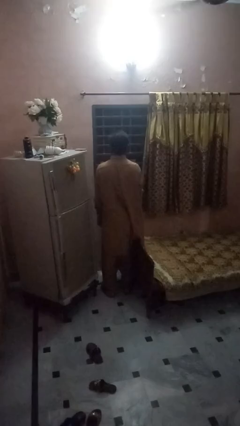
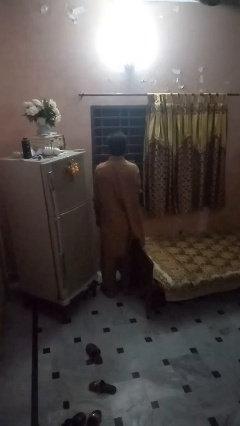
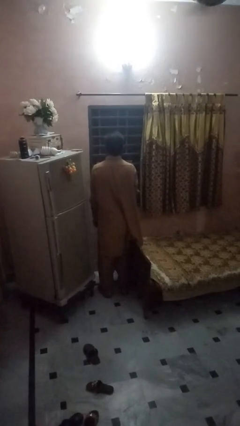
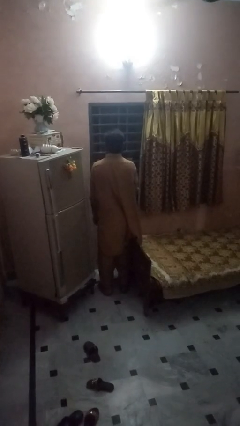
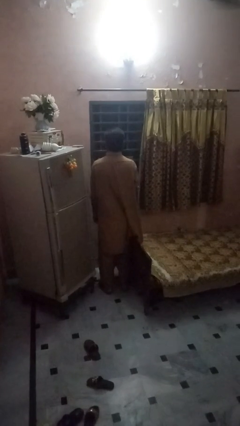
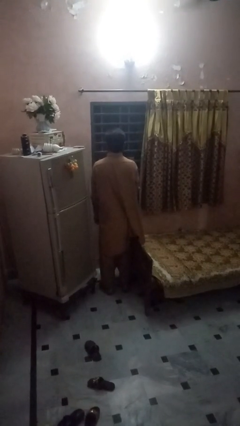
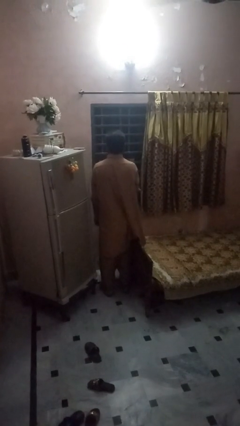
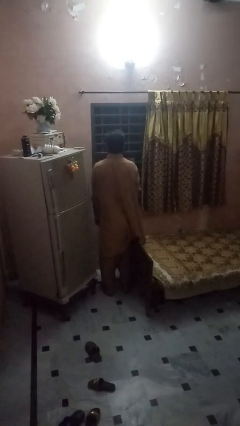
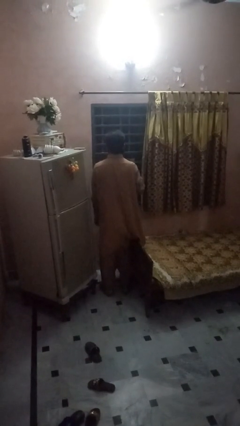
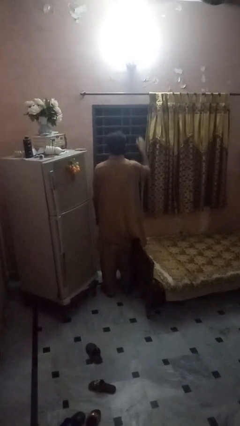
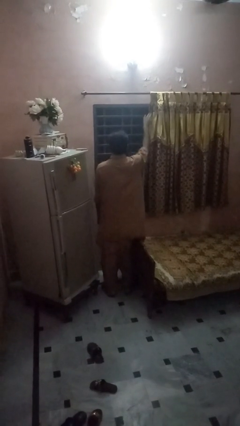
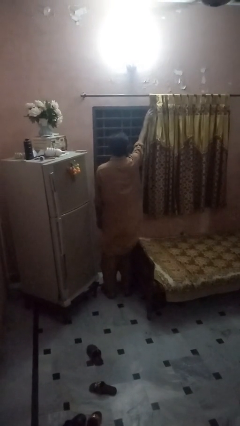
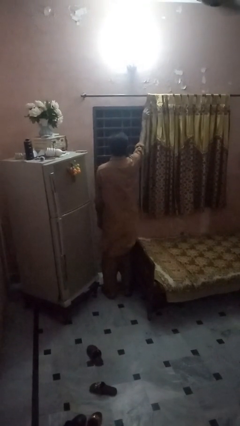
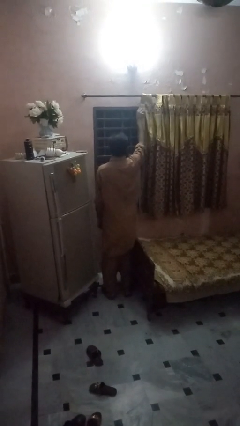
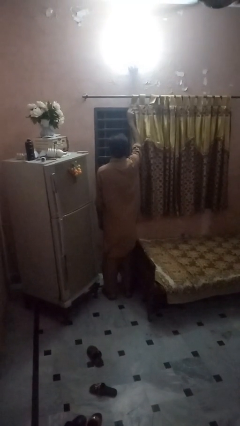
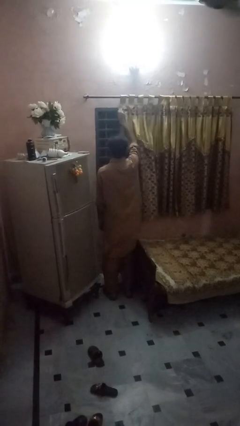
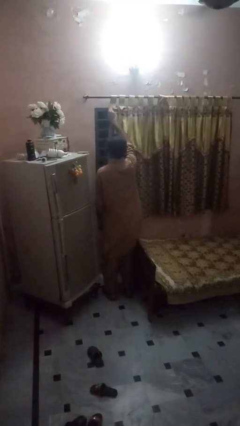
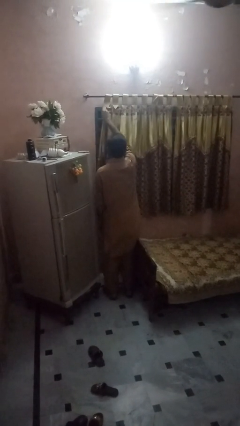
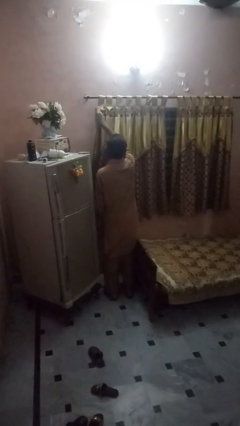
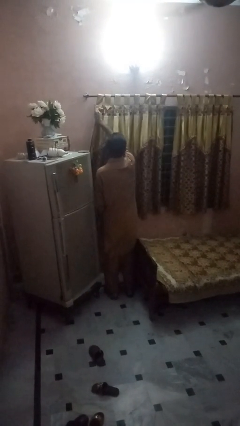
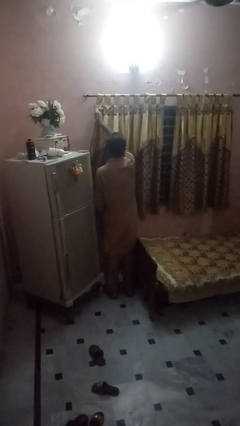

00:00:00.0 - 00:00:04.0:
person closes curtains

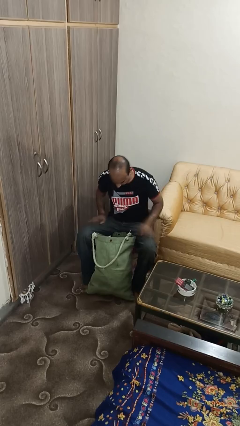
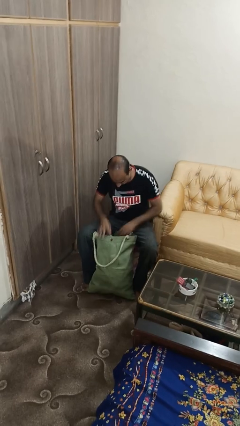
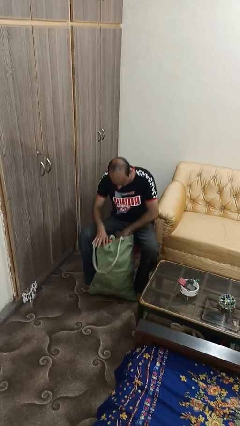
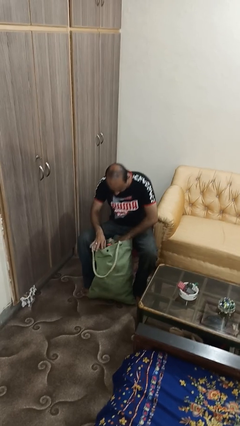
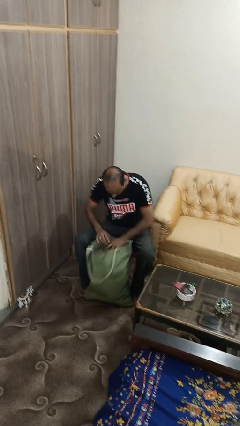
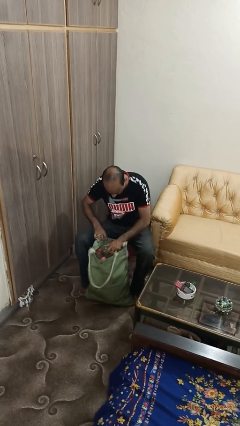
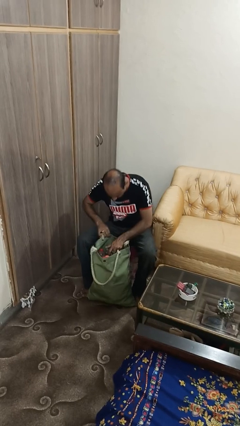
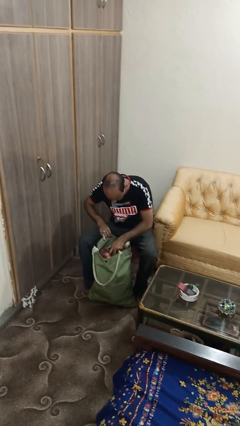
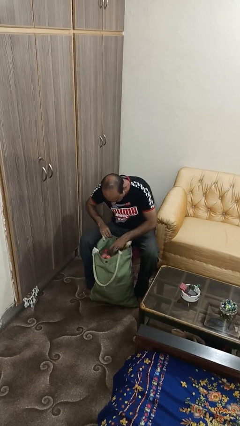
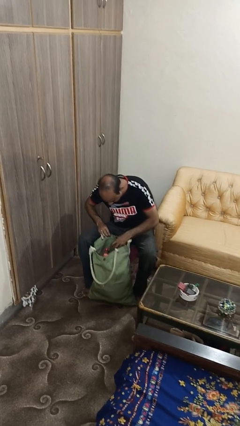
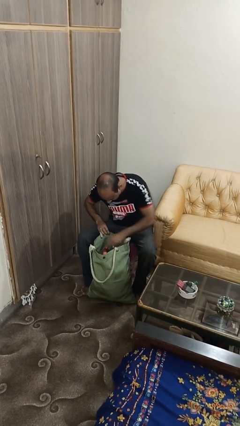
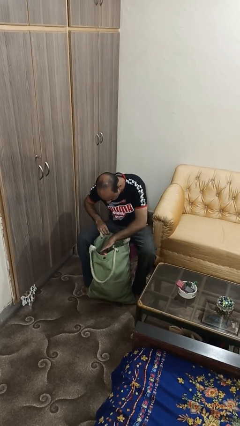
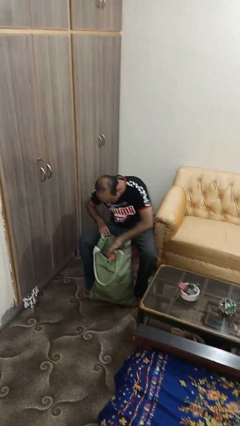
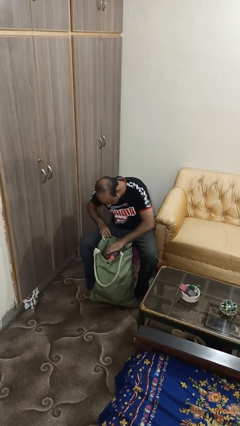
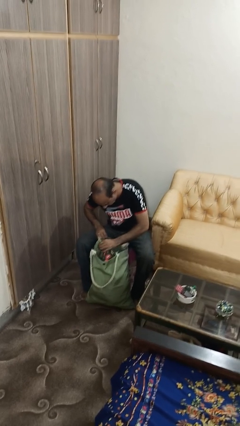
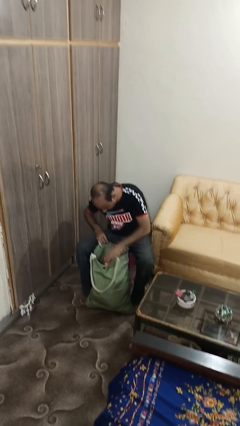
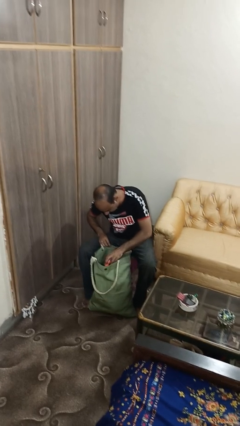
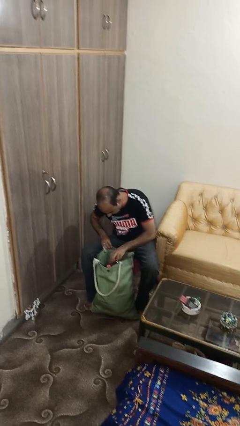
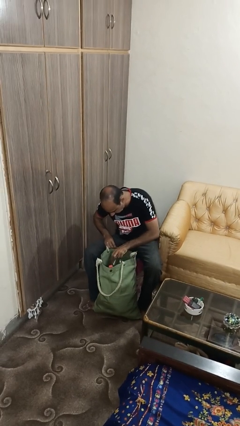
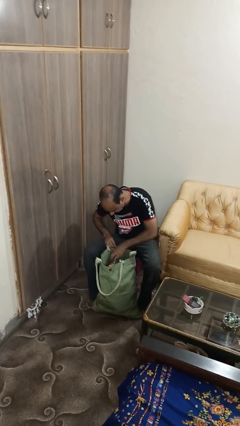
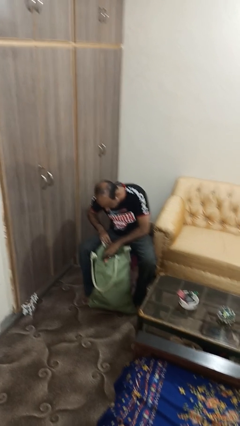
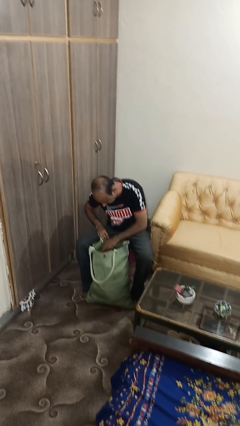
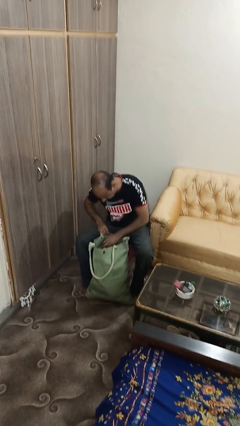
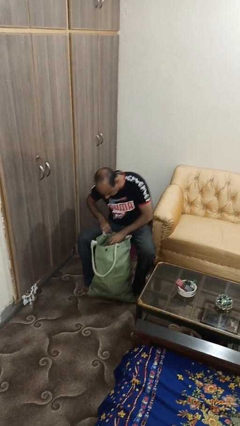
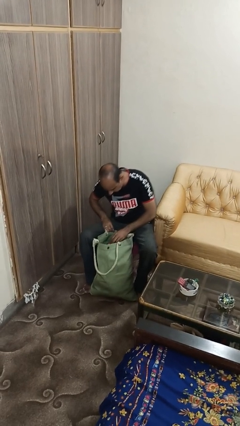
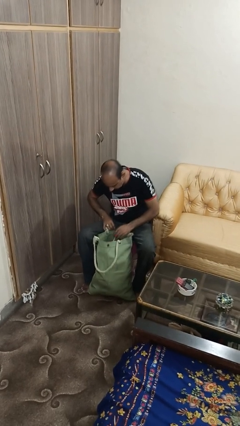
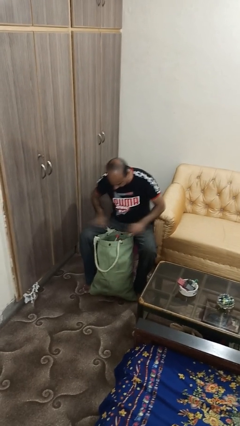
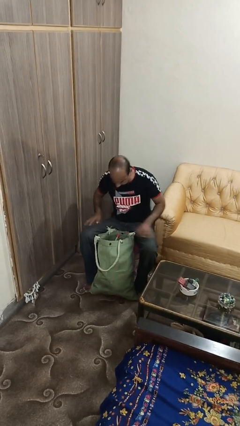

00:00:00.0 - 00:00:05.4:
person searches in bag

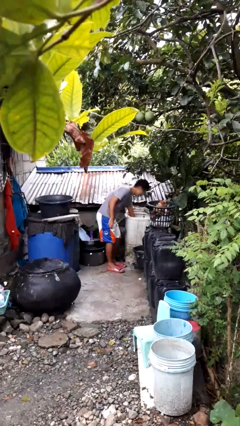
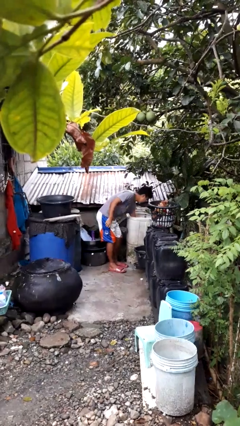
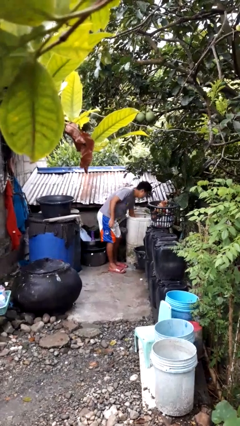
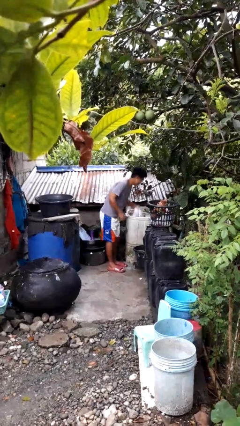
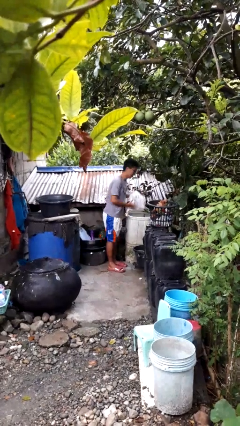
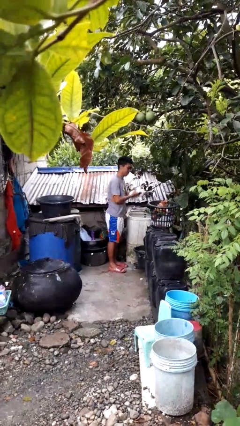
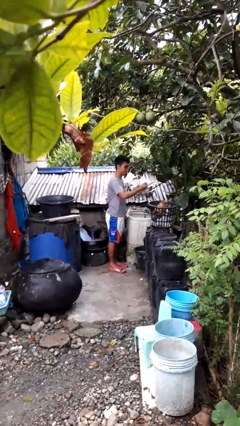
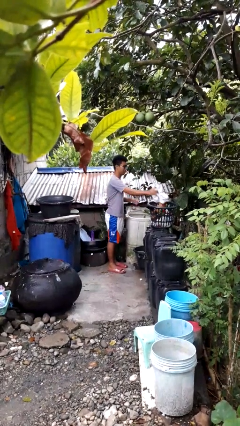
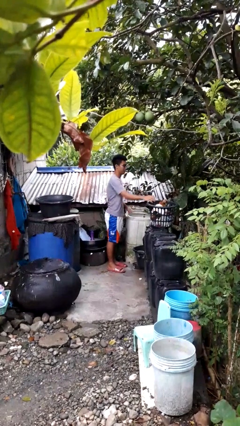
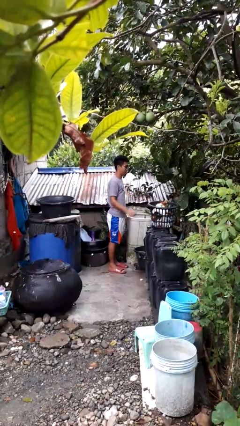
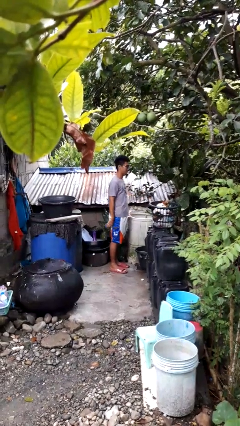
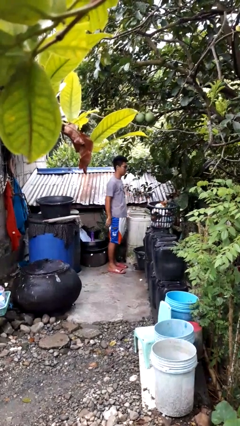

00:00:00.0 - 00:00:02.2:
person loads clotheswasher

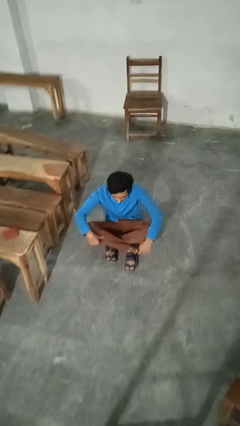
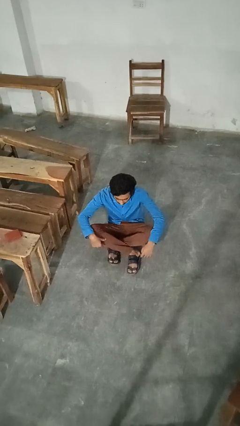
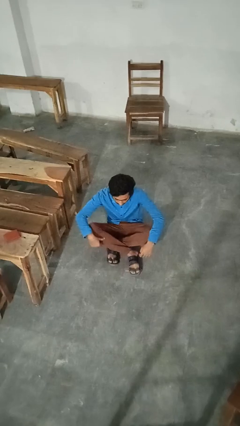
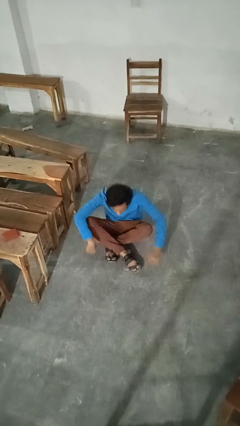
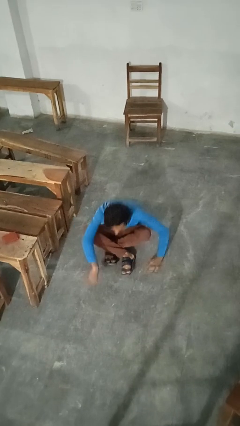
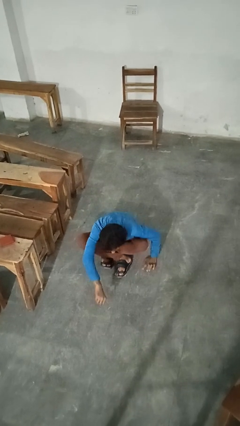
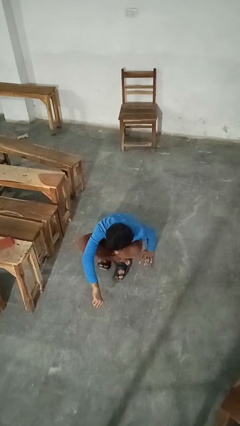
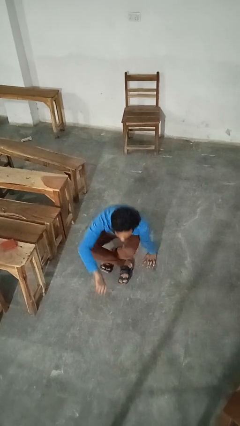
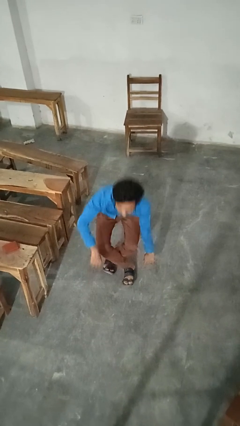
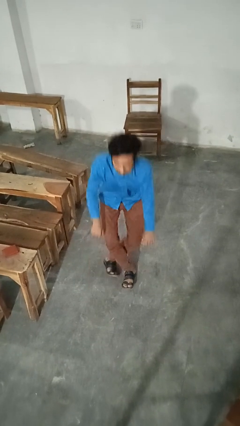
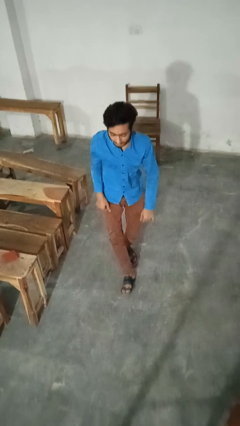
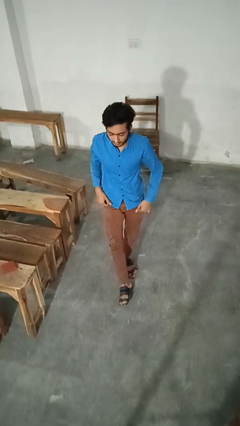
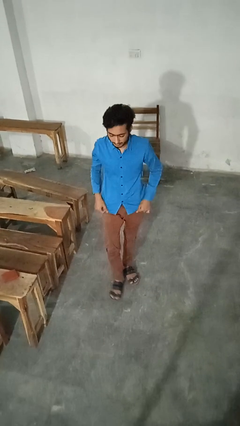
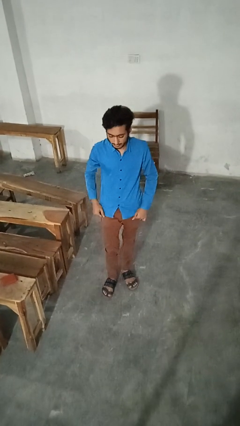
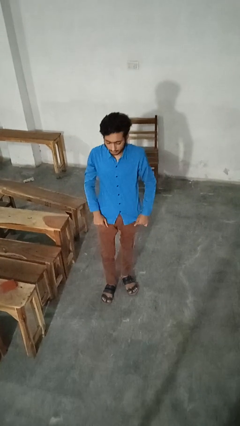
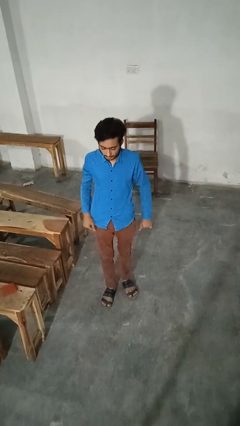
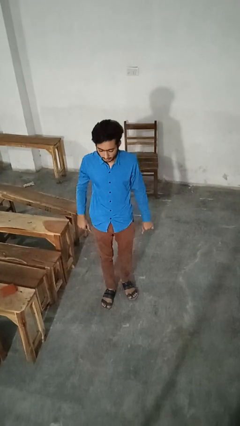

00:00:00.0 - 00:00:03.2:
person stands up from floor

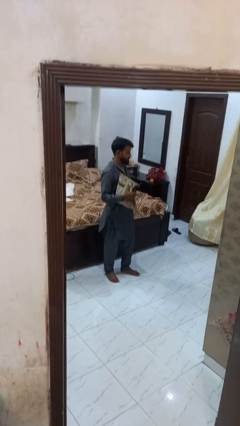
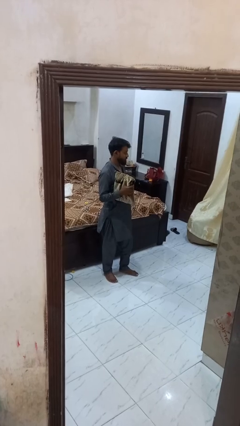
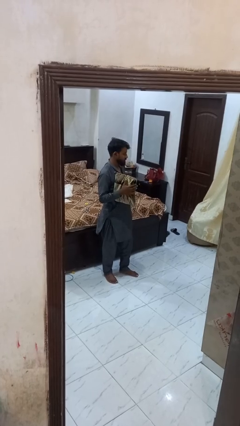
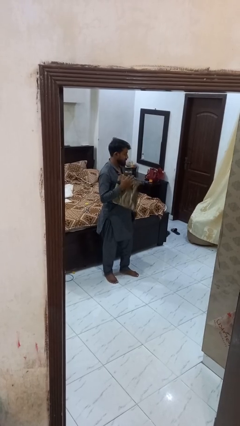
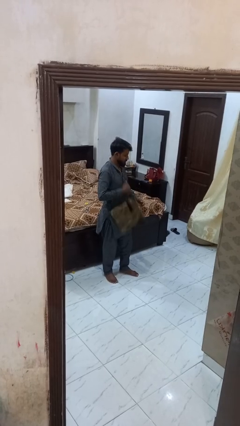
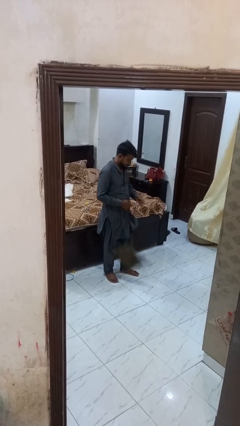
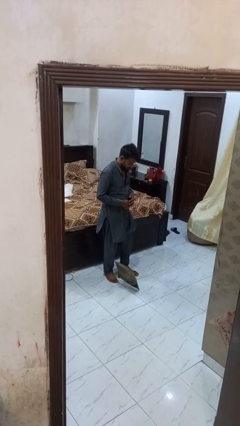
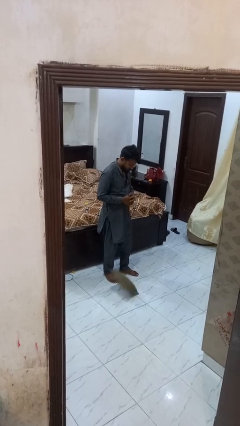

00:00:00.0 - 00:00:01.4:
person drops object

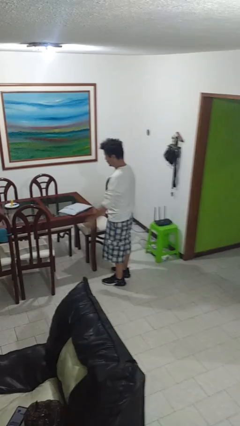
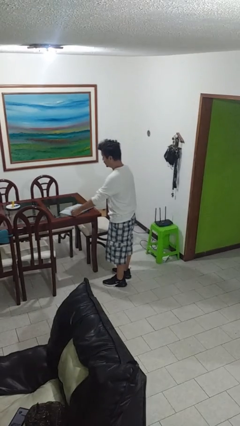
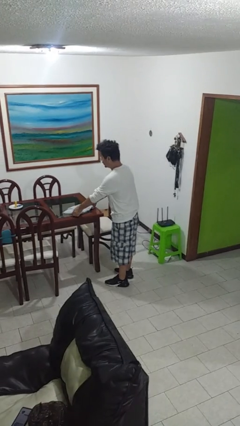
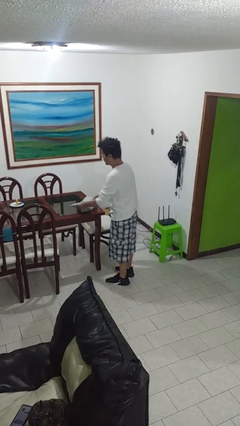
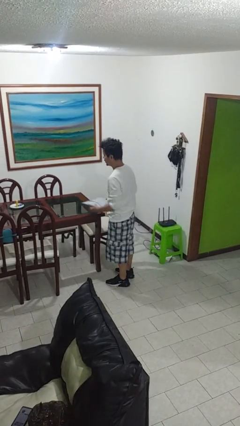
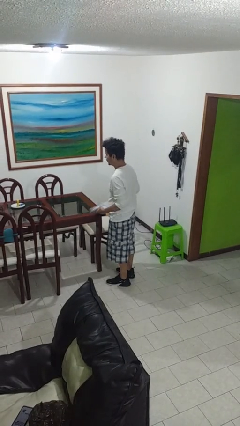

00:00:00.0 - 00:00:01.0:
person picks up object from table
